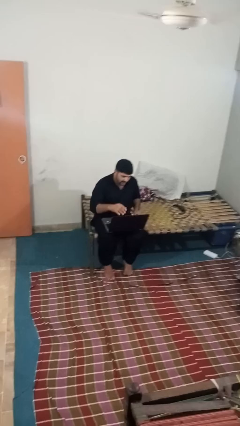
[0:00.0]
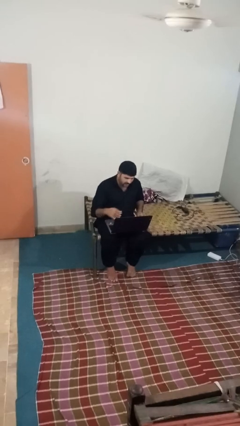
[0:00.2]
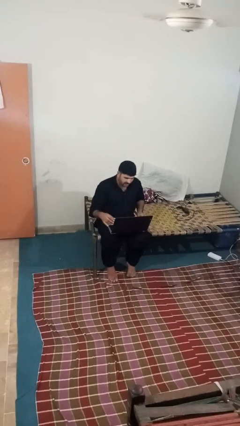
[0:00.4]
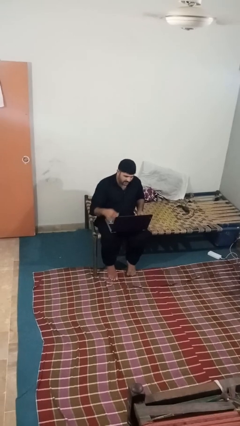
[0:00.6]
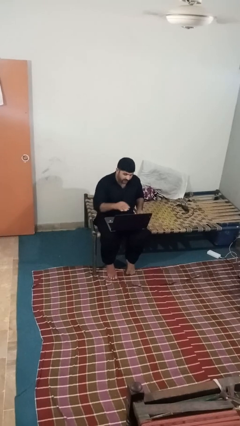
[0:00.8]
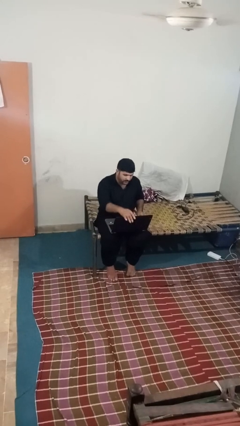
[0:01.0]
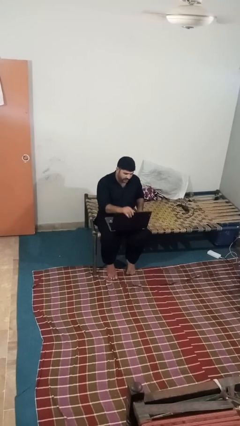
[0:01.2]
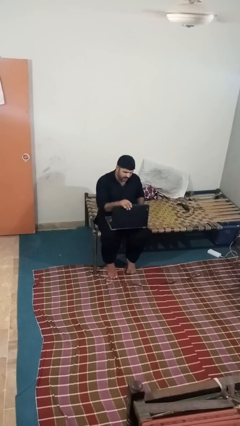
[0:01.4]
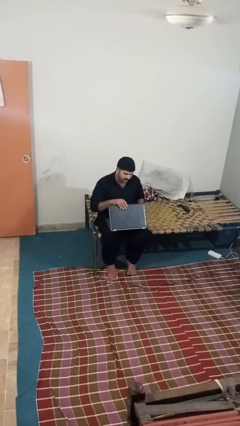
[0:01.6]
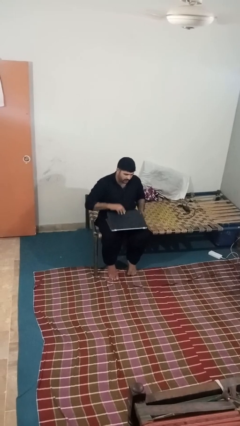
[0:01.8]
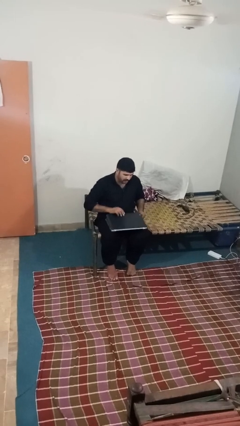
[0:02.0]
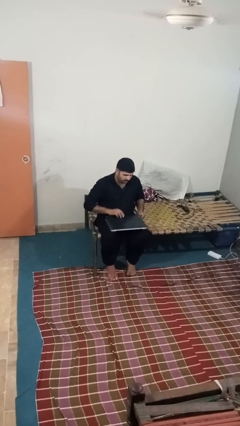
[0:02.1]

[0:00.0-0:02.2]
person closes laptop

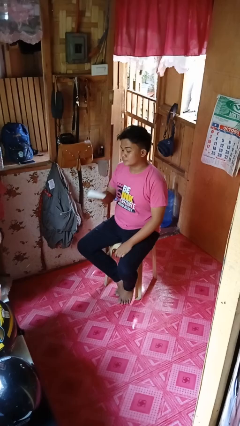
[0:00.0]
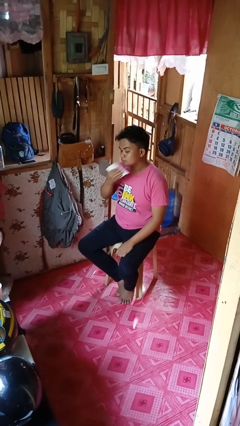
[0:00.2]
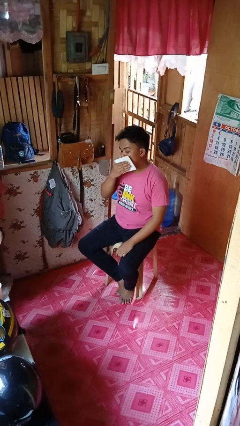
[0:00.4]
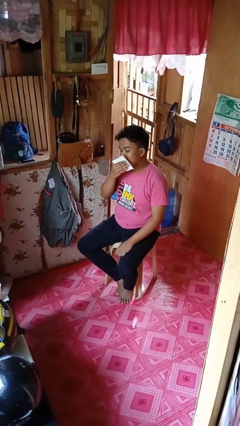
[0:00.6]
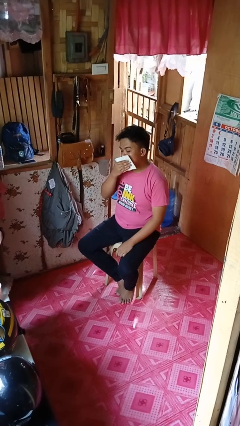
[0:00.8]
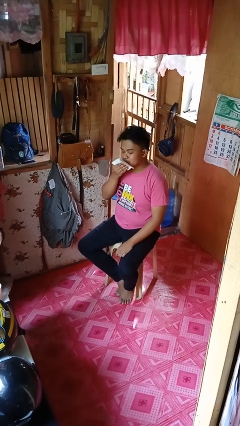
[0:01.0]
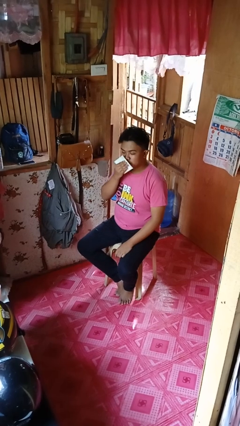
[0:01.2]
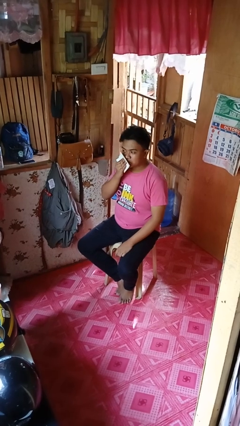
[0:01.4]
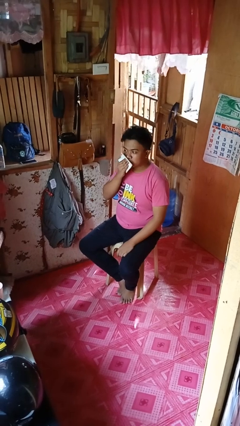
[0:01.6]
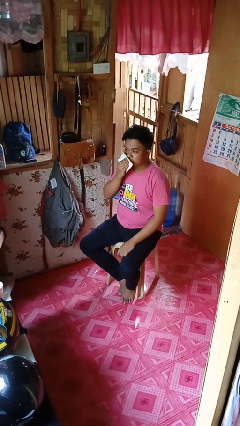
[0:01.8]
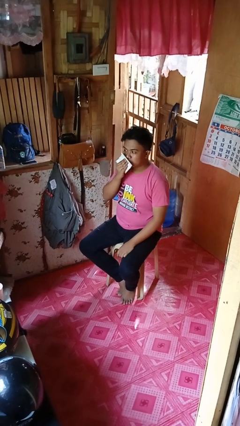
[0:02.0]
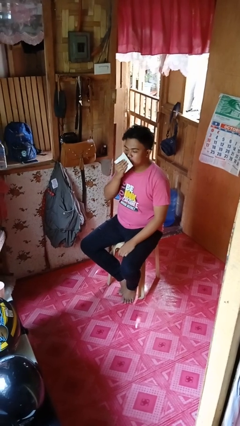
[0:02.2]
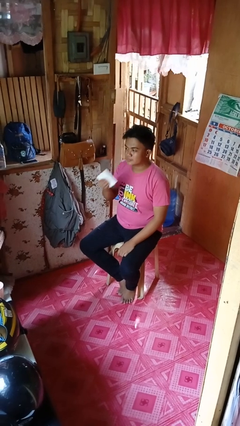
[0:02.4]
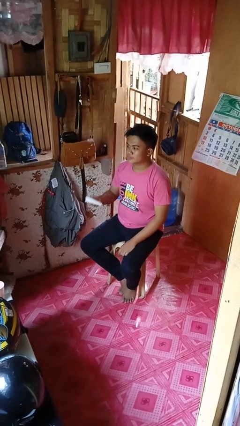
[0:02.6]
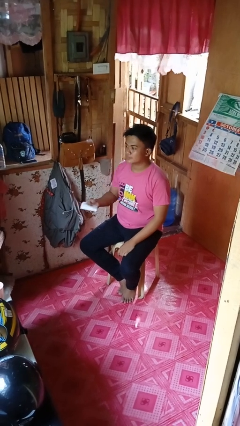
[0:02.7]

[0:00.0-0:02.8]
person wipes mouth with napkin

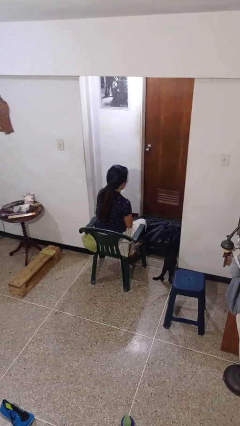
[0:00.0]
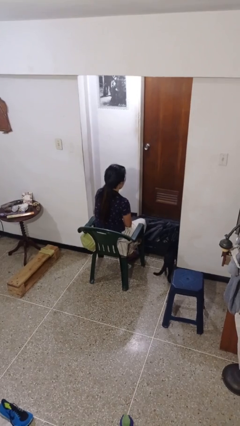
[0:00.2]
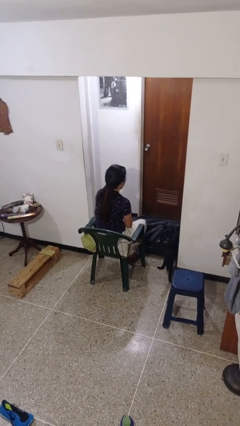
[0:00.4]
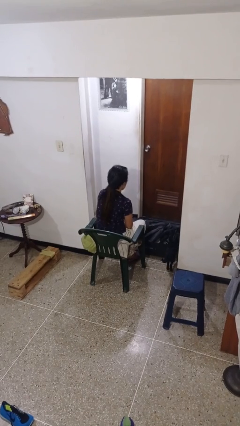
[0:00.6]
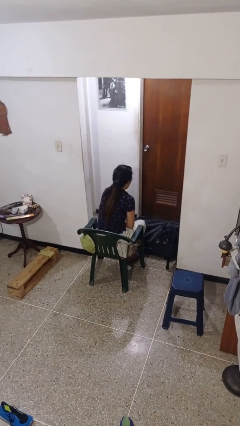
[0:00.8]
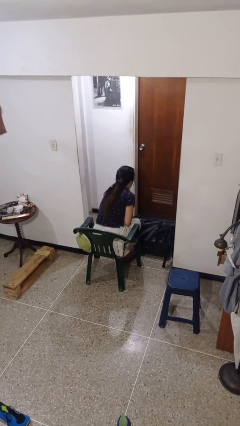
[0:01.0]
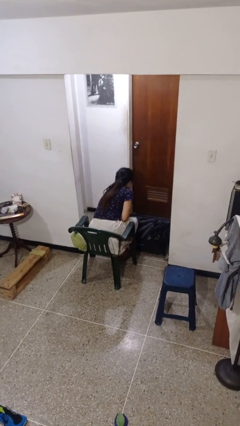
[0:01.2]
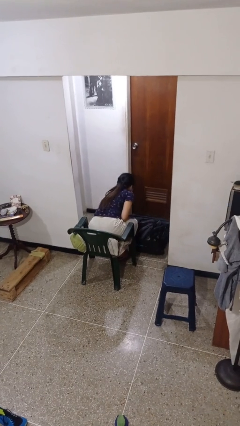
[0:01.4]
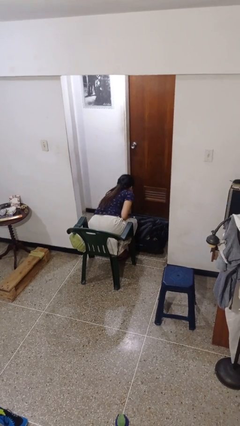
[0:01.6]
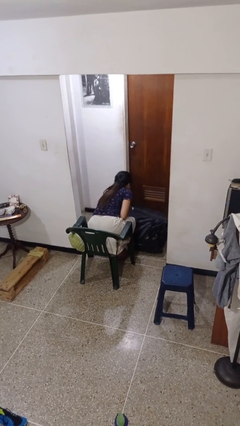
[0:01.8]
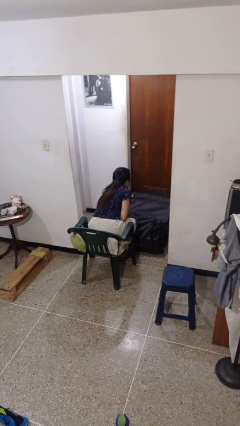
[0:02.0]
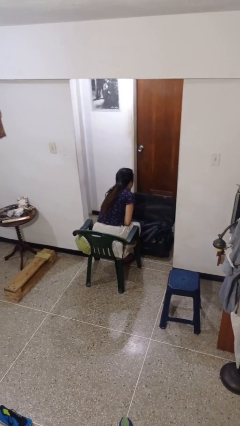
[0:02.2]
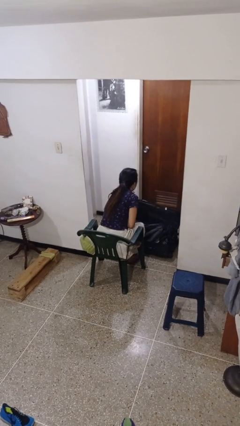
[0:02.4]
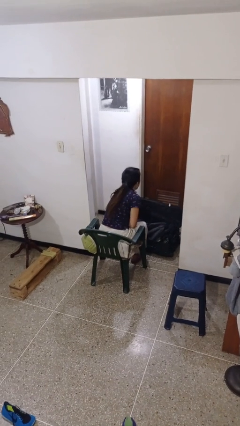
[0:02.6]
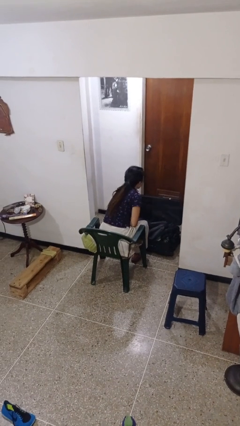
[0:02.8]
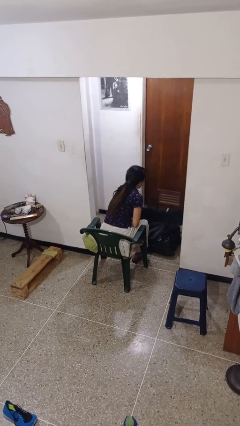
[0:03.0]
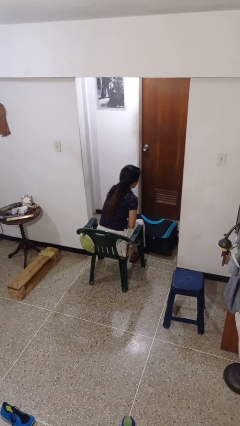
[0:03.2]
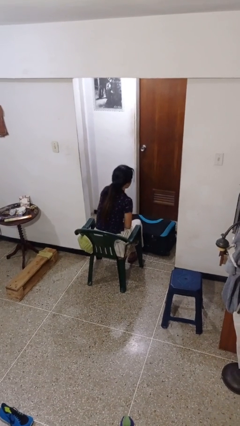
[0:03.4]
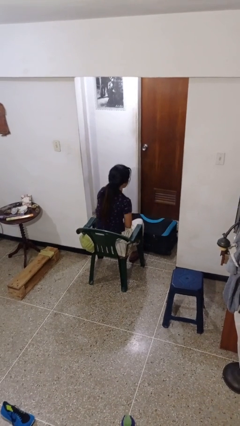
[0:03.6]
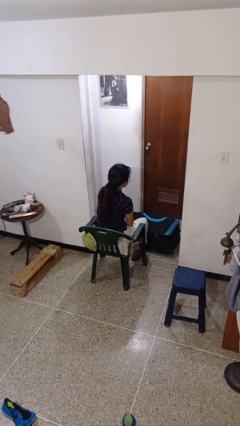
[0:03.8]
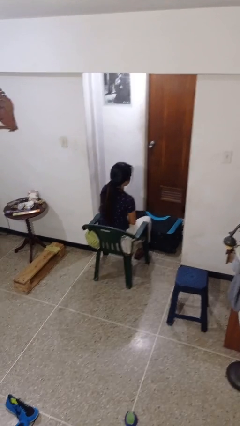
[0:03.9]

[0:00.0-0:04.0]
person closes suitcase

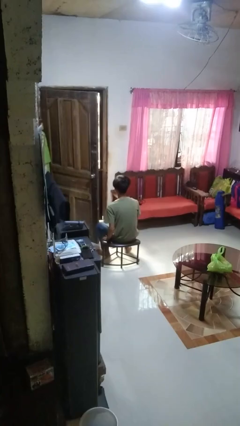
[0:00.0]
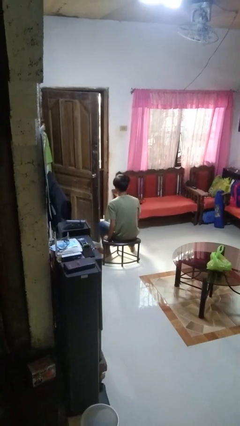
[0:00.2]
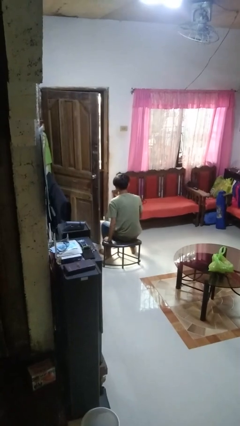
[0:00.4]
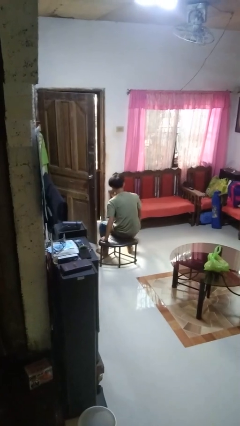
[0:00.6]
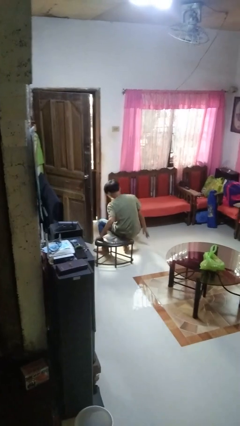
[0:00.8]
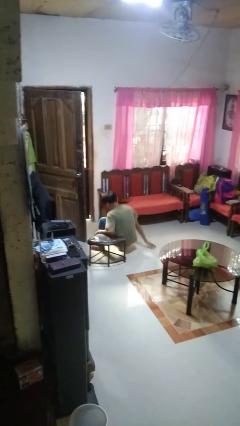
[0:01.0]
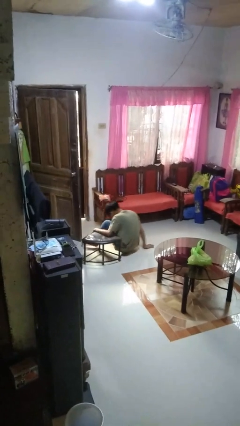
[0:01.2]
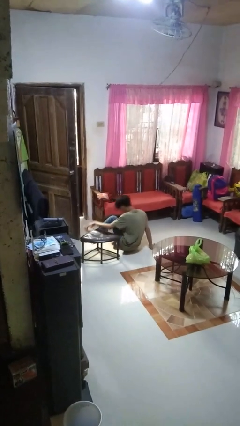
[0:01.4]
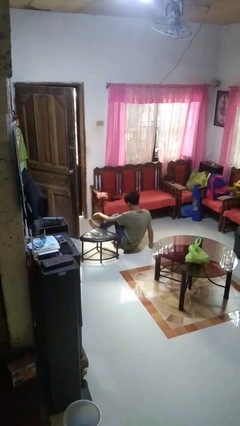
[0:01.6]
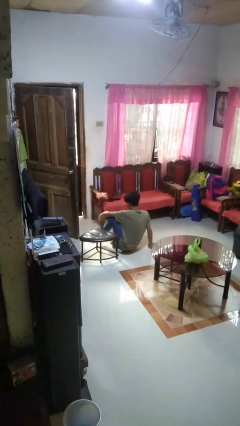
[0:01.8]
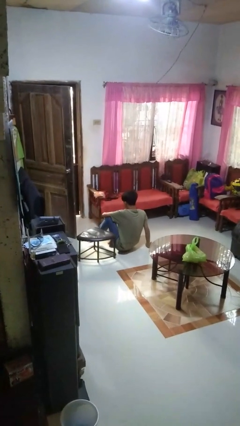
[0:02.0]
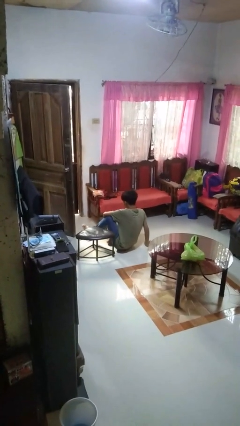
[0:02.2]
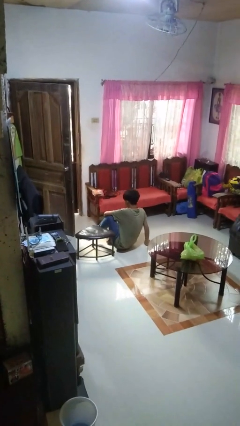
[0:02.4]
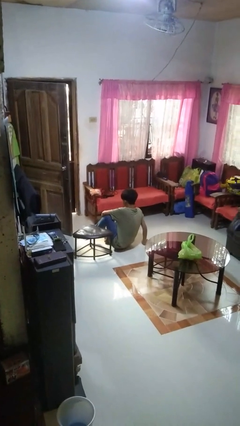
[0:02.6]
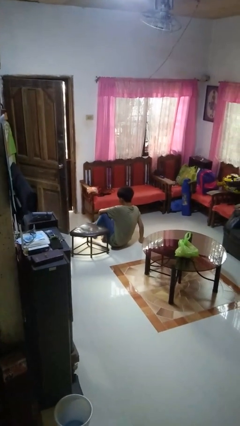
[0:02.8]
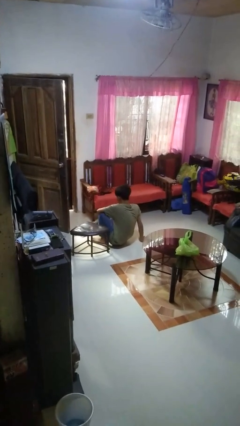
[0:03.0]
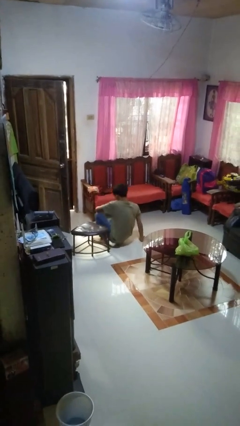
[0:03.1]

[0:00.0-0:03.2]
person falls from chair

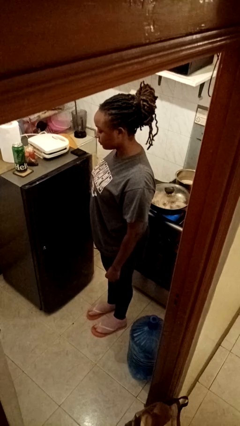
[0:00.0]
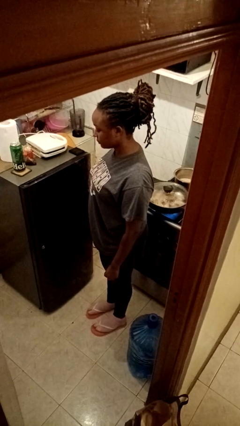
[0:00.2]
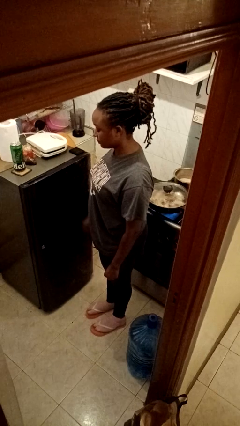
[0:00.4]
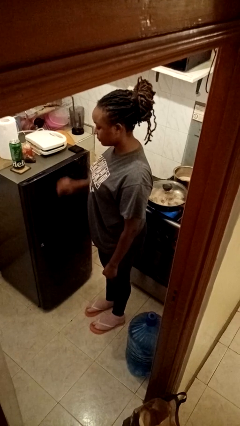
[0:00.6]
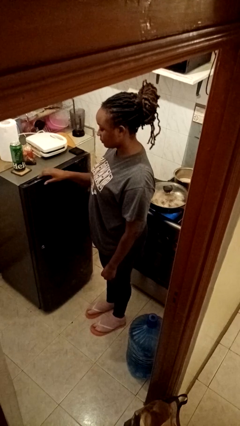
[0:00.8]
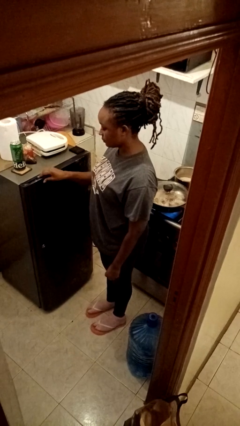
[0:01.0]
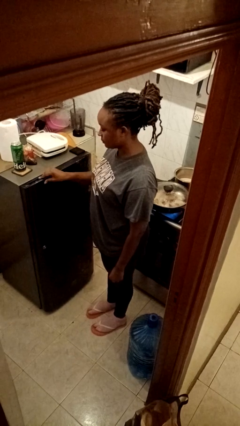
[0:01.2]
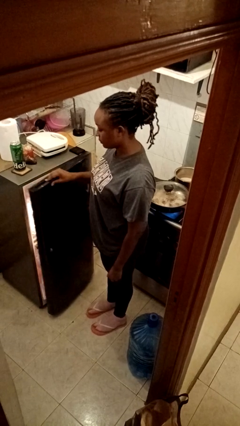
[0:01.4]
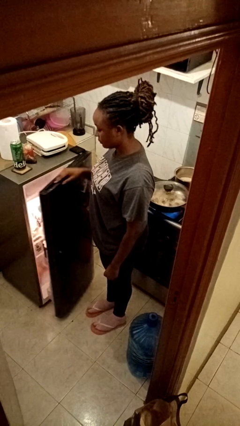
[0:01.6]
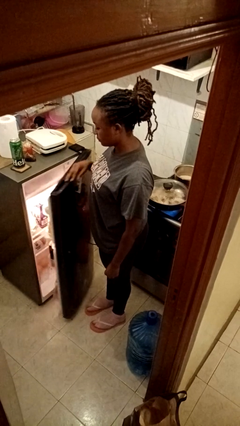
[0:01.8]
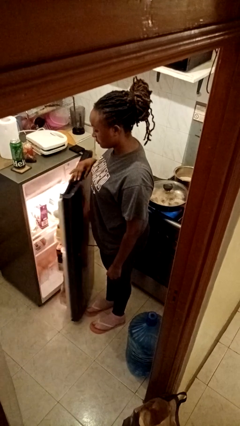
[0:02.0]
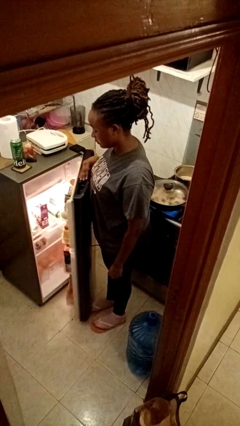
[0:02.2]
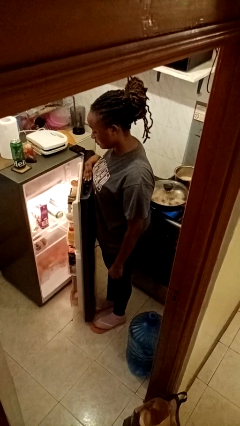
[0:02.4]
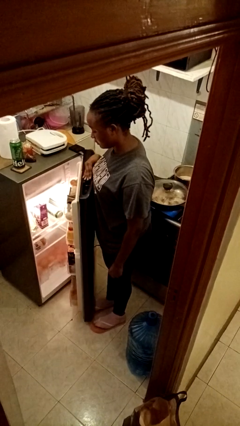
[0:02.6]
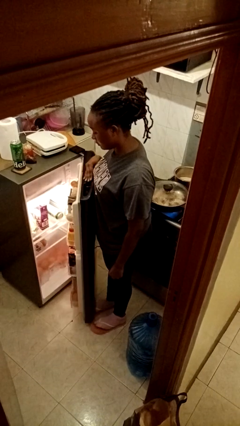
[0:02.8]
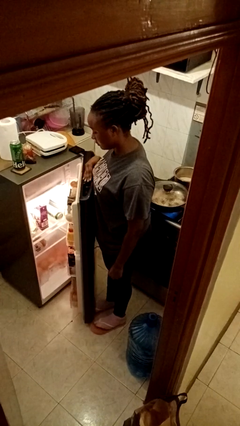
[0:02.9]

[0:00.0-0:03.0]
person opens refrigerator

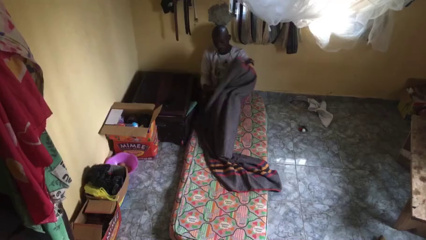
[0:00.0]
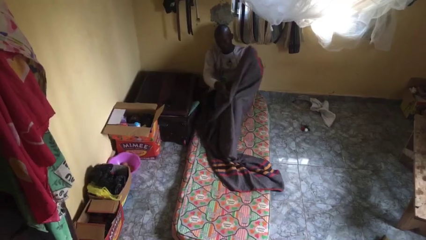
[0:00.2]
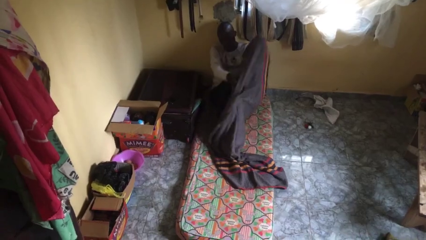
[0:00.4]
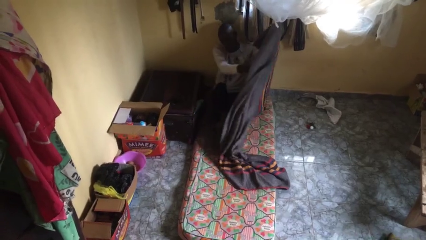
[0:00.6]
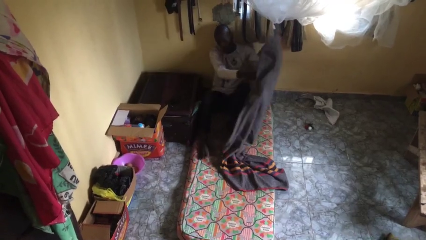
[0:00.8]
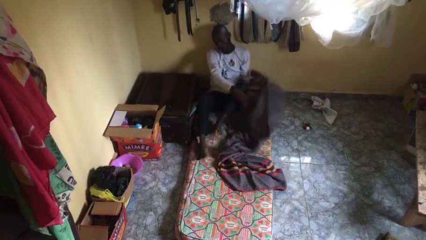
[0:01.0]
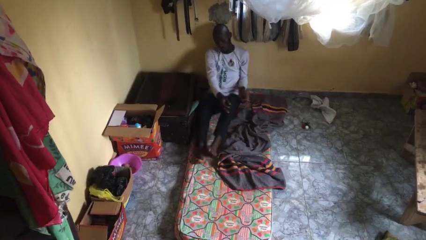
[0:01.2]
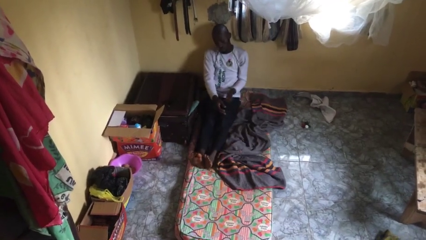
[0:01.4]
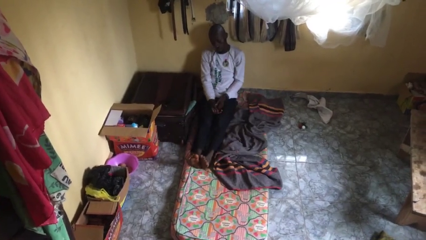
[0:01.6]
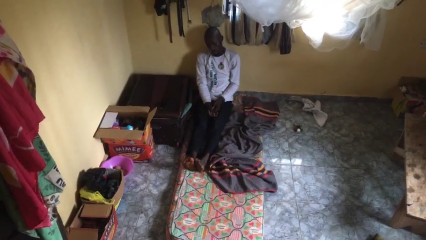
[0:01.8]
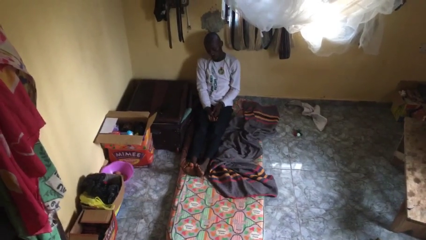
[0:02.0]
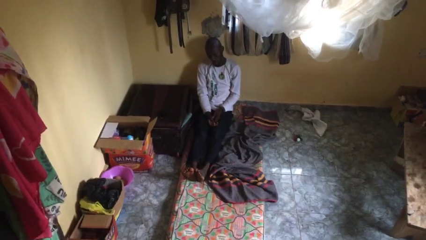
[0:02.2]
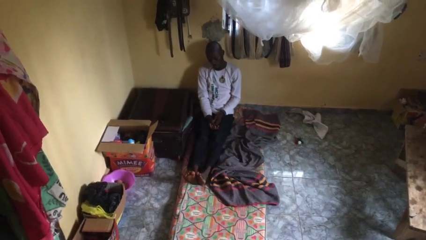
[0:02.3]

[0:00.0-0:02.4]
person uncovers with blanket

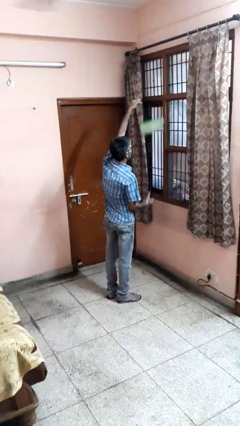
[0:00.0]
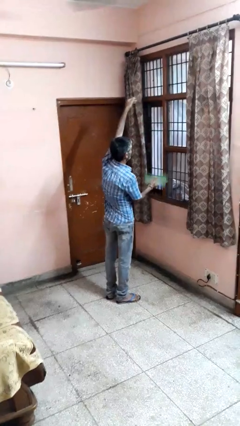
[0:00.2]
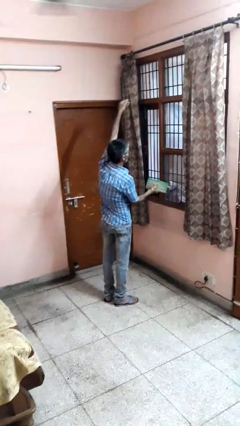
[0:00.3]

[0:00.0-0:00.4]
person drops object
